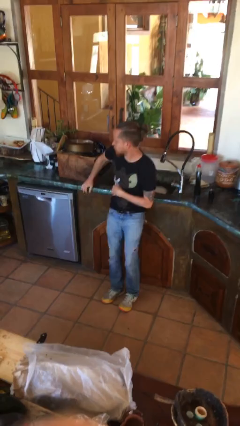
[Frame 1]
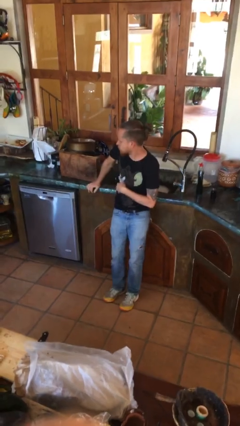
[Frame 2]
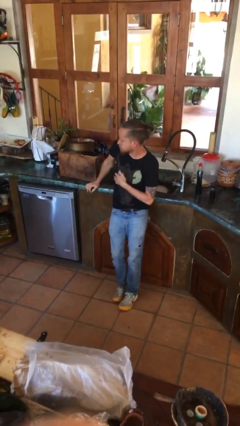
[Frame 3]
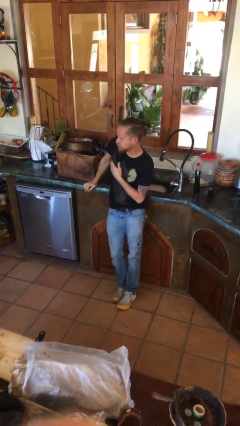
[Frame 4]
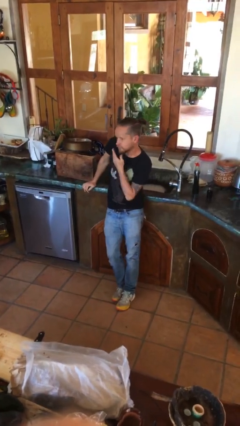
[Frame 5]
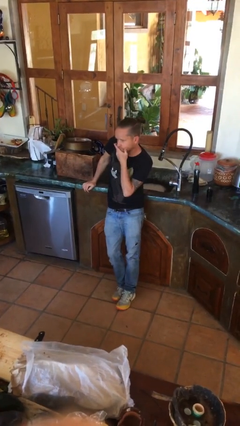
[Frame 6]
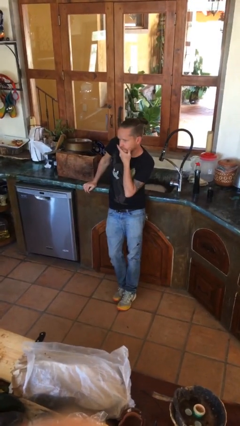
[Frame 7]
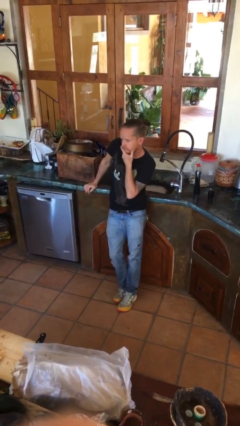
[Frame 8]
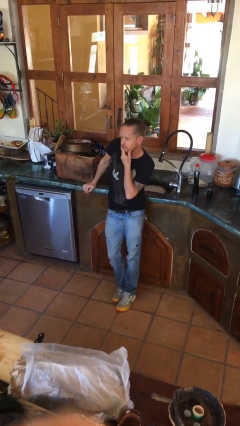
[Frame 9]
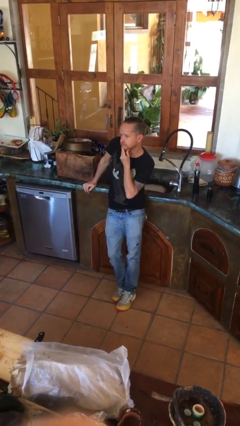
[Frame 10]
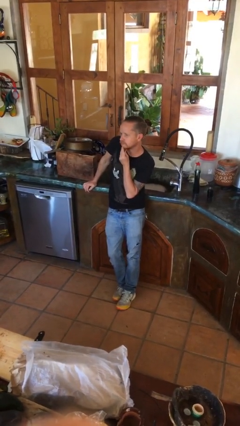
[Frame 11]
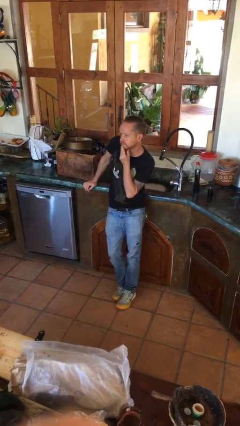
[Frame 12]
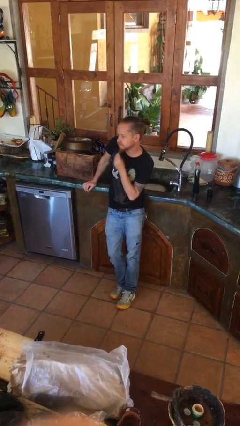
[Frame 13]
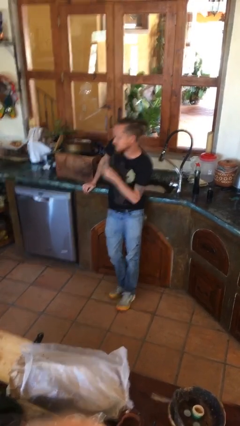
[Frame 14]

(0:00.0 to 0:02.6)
person strokes chin

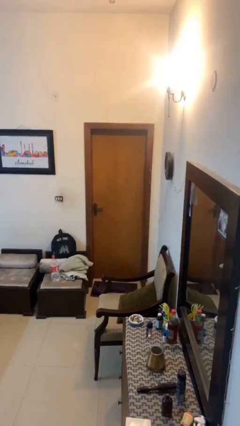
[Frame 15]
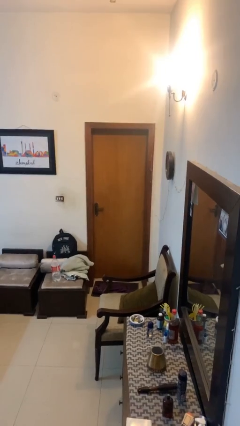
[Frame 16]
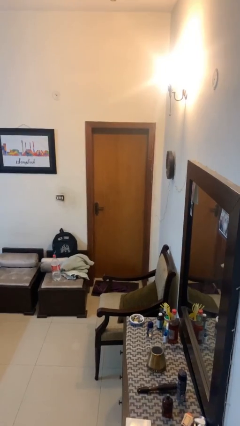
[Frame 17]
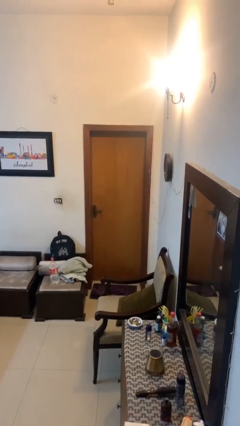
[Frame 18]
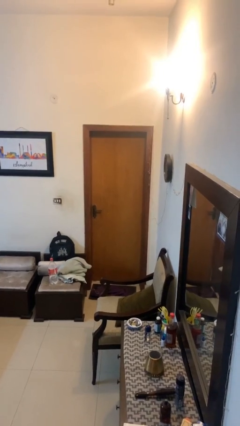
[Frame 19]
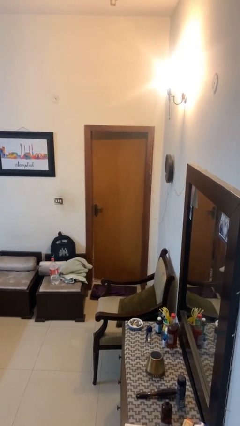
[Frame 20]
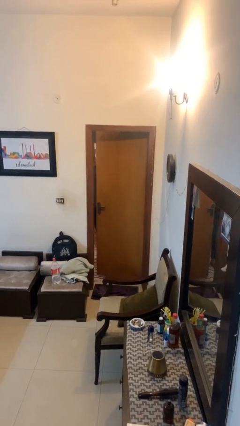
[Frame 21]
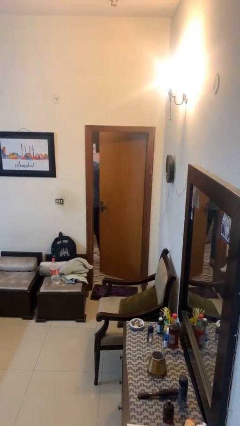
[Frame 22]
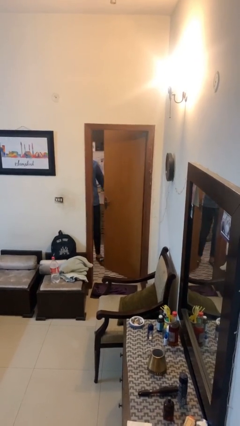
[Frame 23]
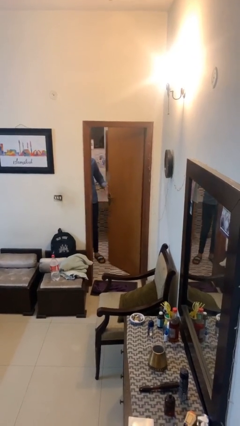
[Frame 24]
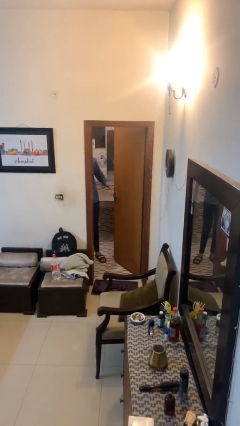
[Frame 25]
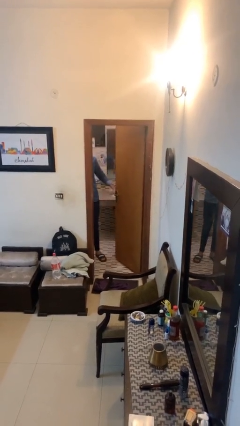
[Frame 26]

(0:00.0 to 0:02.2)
person opens facility door

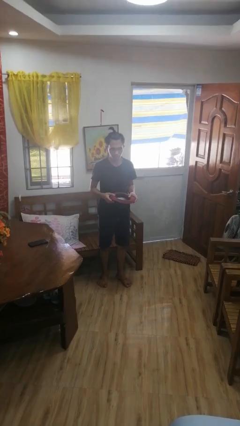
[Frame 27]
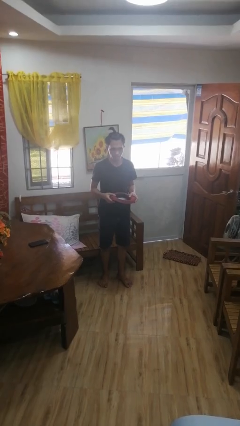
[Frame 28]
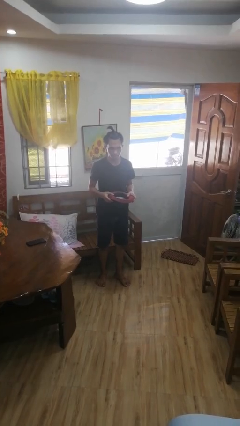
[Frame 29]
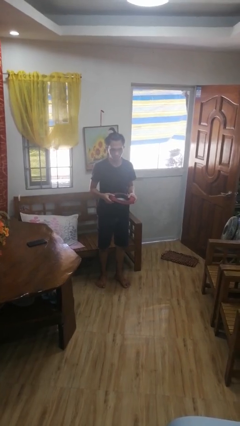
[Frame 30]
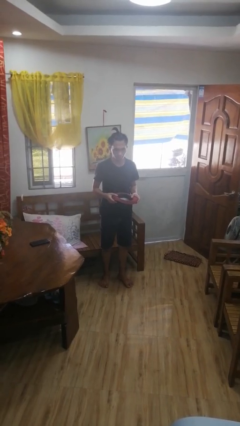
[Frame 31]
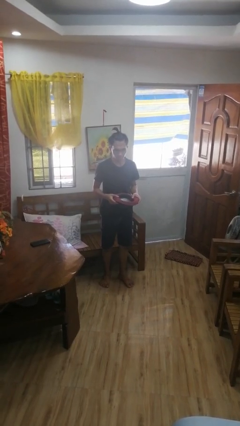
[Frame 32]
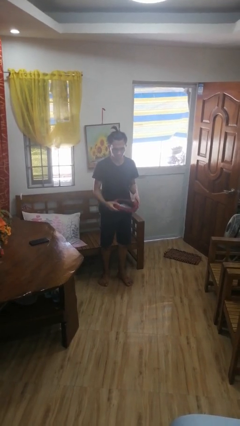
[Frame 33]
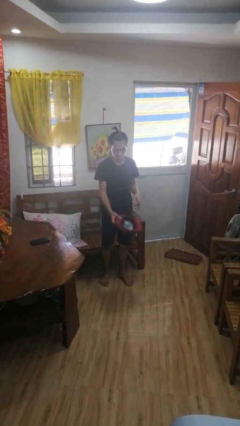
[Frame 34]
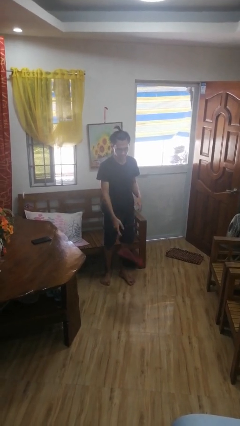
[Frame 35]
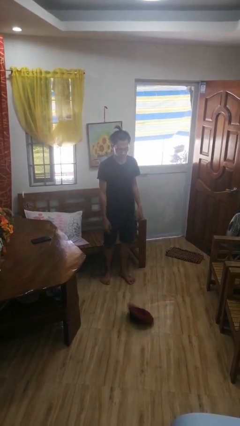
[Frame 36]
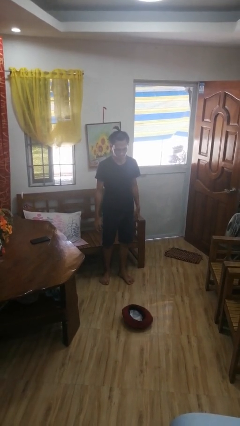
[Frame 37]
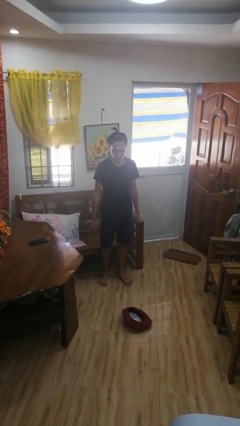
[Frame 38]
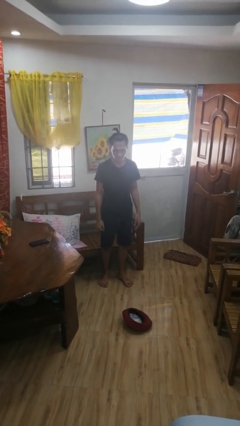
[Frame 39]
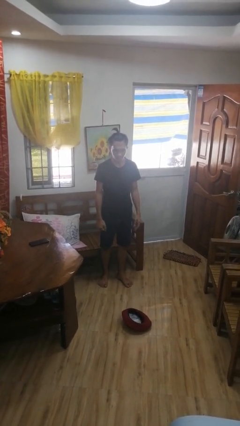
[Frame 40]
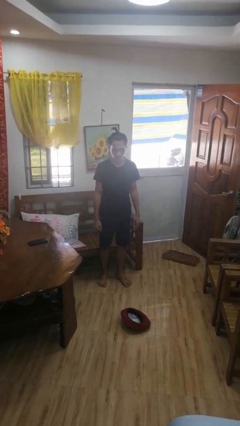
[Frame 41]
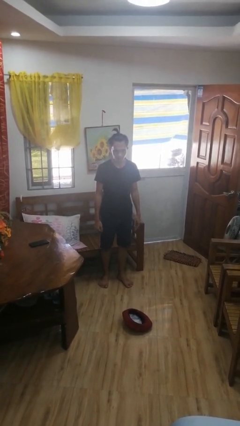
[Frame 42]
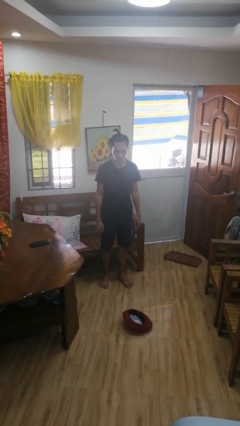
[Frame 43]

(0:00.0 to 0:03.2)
person throws object to ground

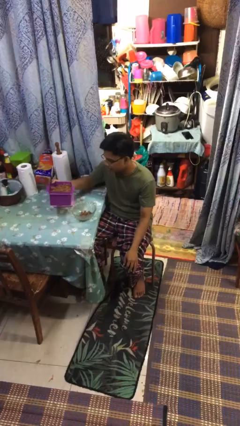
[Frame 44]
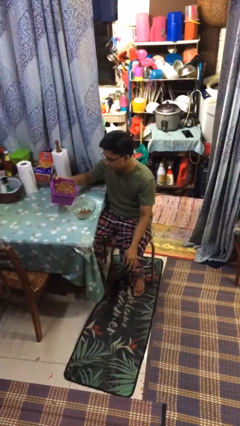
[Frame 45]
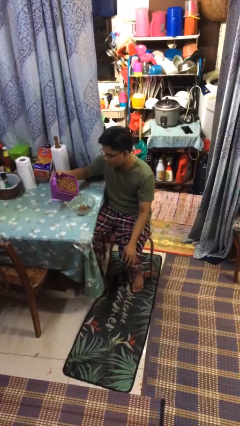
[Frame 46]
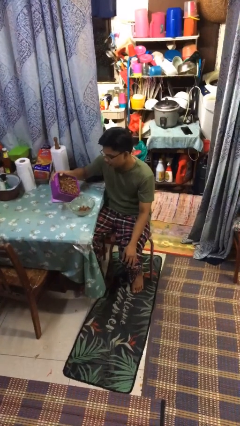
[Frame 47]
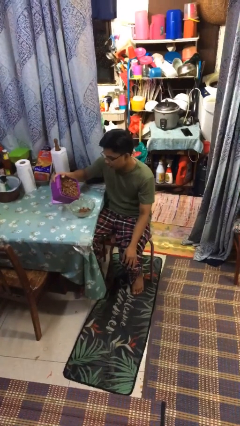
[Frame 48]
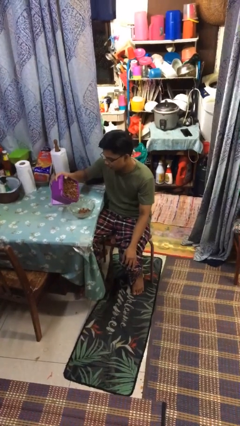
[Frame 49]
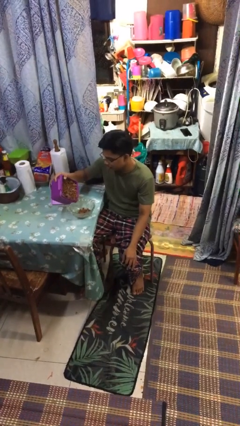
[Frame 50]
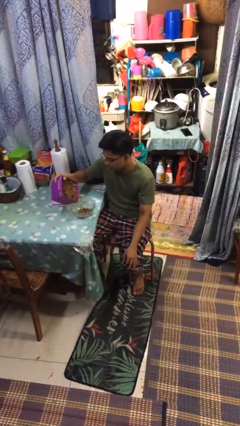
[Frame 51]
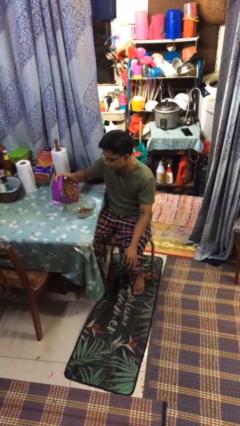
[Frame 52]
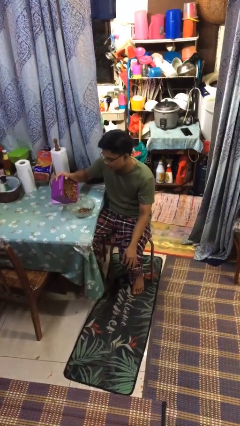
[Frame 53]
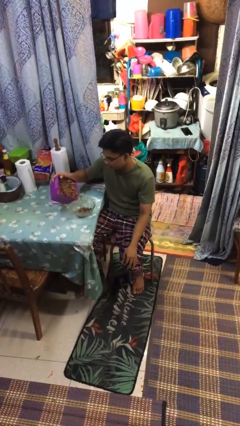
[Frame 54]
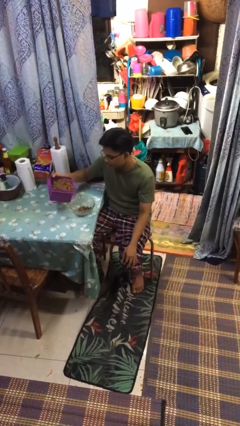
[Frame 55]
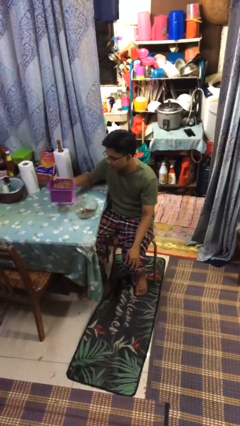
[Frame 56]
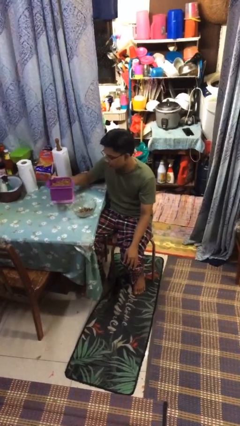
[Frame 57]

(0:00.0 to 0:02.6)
person pours into bowl

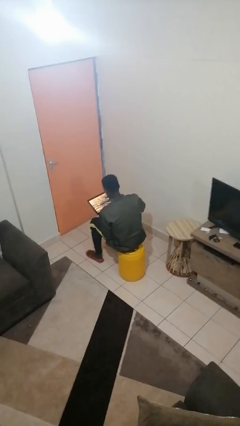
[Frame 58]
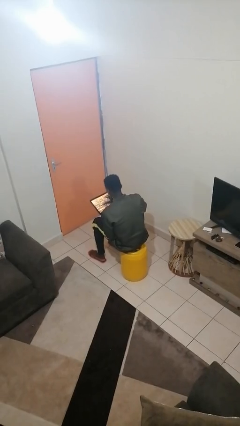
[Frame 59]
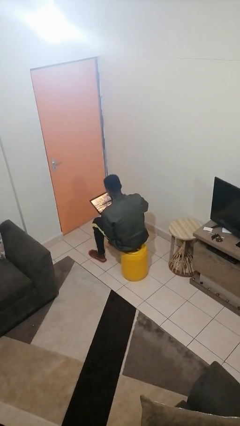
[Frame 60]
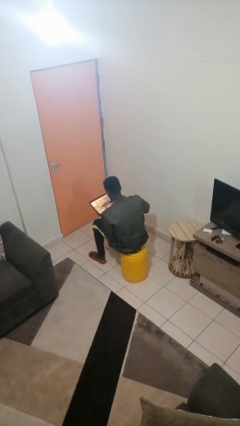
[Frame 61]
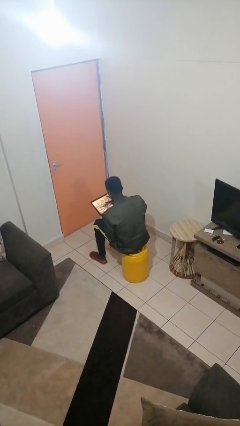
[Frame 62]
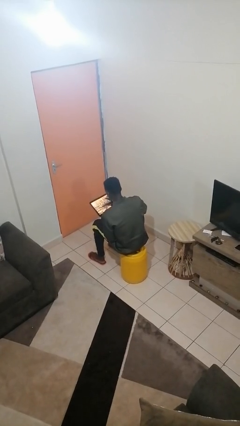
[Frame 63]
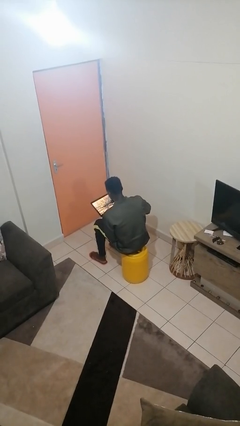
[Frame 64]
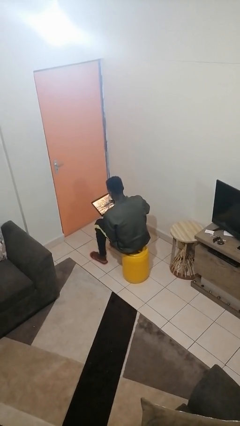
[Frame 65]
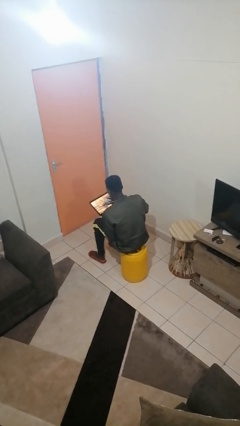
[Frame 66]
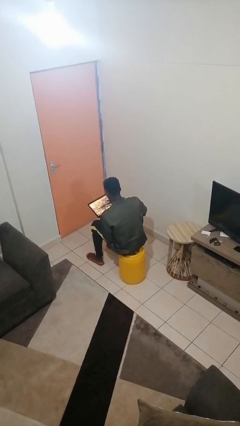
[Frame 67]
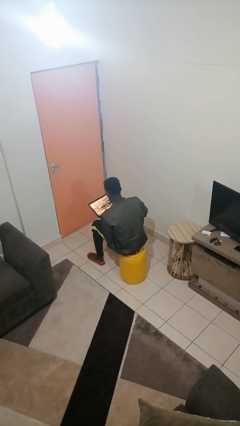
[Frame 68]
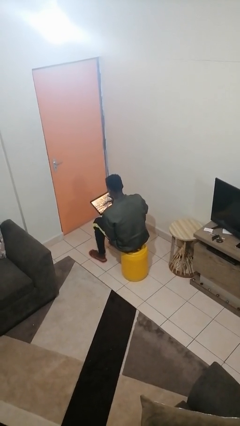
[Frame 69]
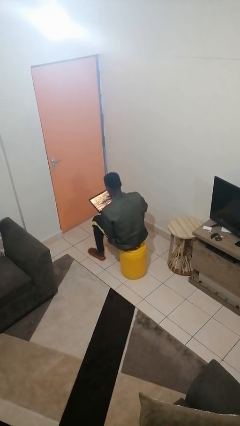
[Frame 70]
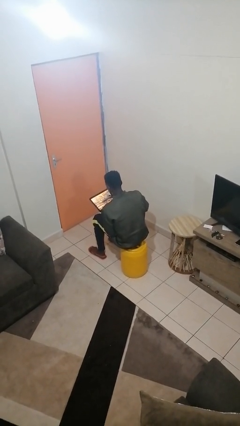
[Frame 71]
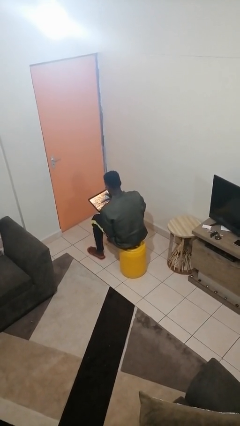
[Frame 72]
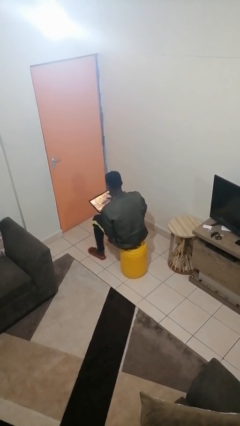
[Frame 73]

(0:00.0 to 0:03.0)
person interacts with tablet

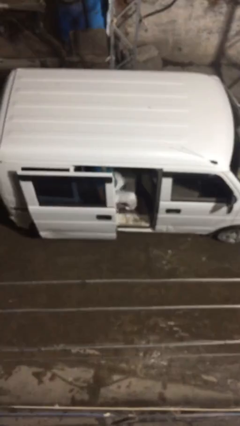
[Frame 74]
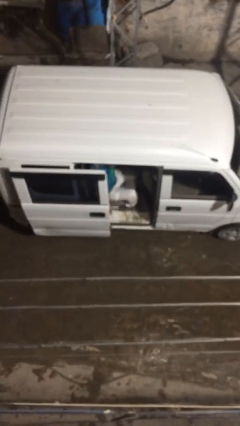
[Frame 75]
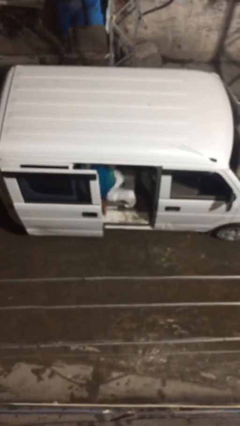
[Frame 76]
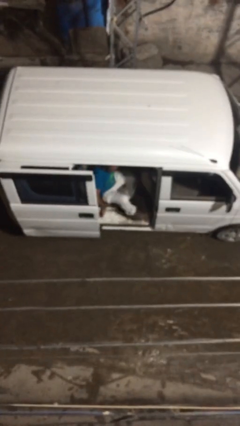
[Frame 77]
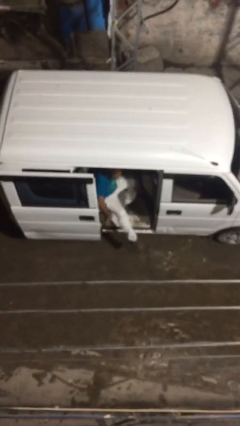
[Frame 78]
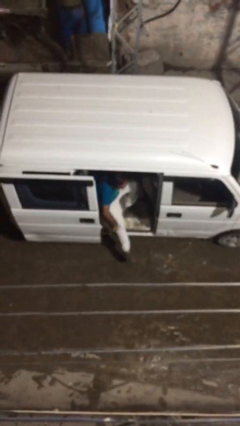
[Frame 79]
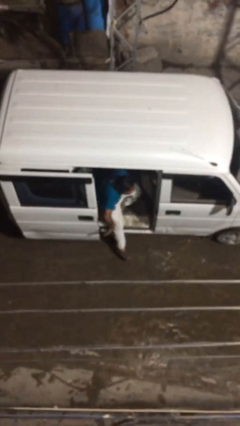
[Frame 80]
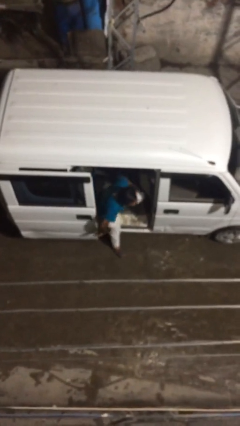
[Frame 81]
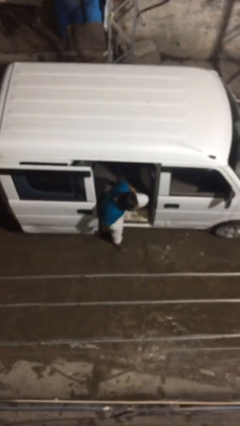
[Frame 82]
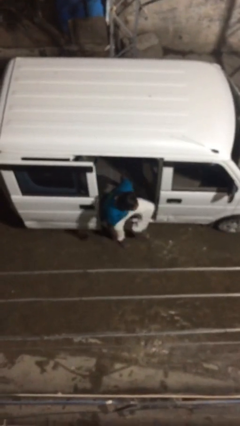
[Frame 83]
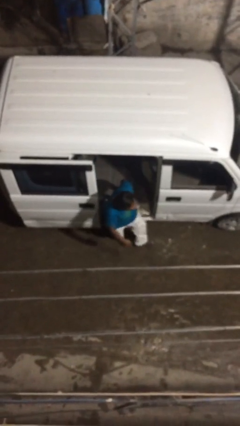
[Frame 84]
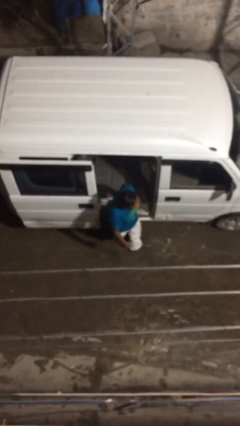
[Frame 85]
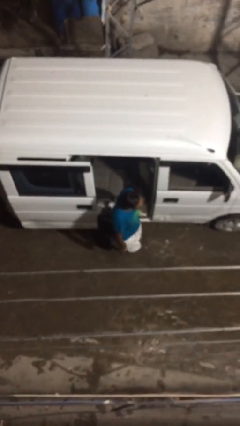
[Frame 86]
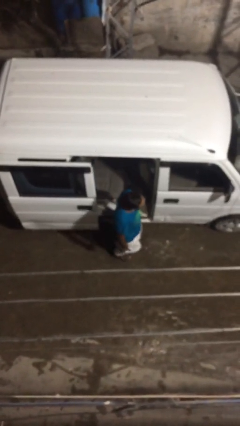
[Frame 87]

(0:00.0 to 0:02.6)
person exits car

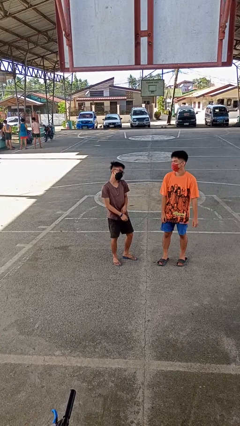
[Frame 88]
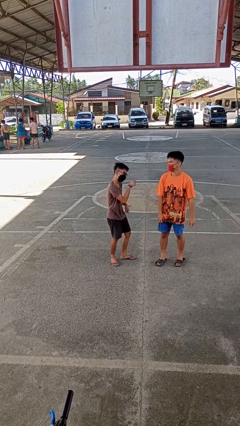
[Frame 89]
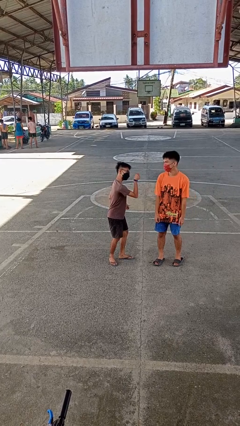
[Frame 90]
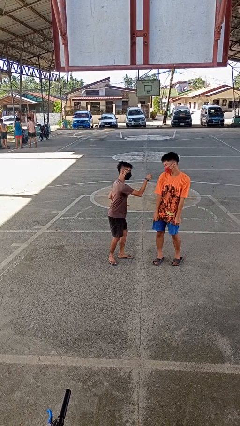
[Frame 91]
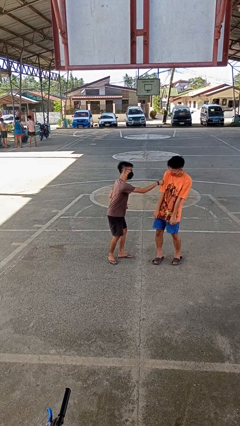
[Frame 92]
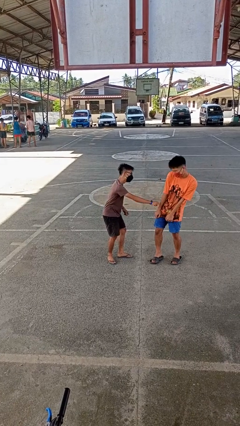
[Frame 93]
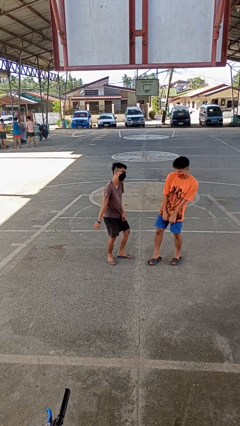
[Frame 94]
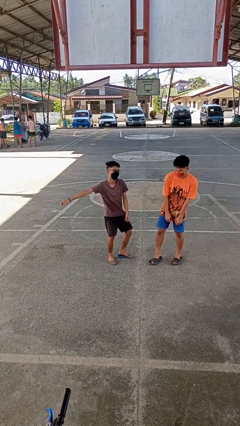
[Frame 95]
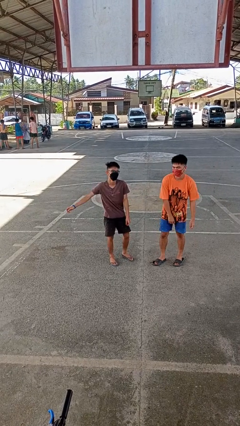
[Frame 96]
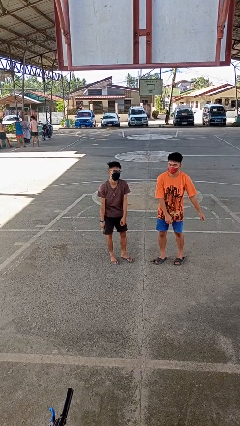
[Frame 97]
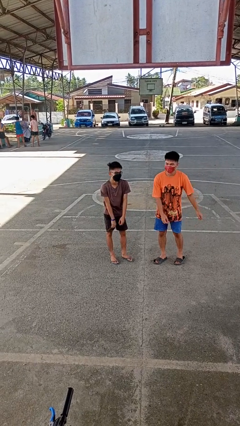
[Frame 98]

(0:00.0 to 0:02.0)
person pounds shoulders of person
